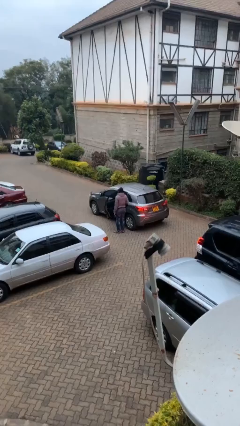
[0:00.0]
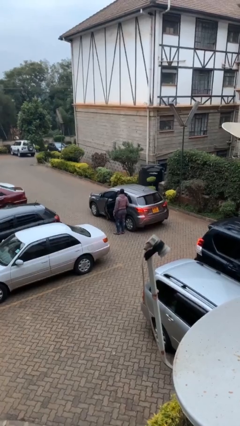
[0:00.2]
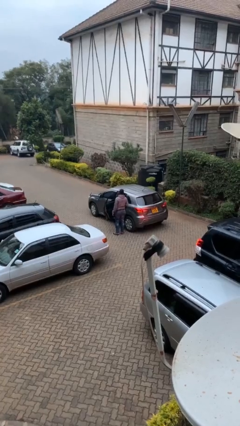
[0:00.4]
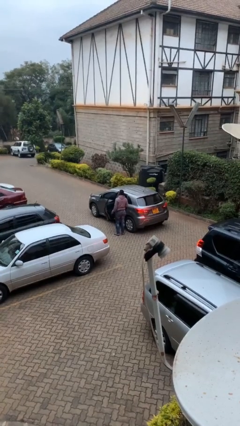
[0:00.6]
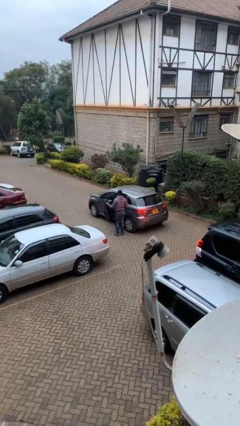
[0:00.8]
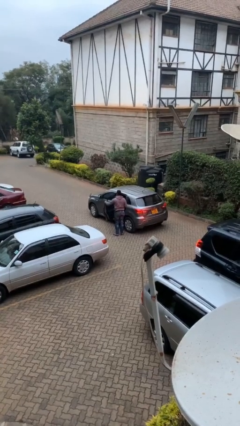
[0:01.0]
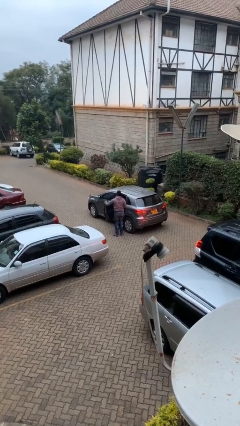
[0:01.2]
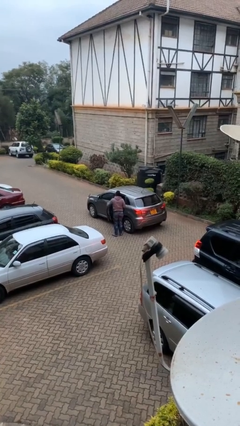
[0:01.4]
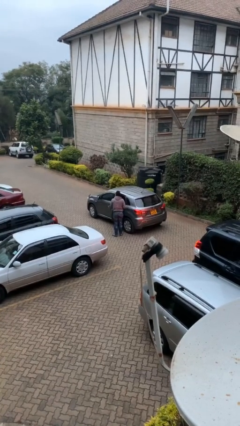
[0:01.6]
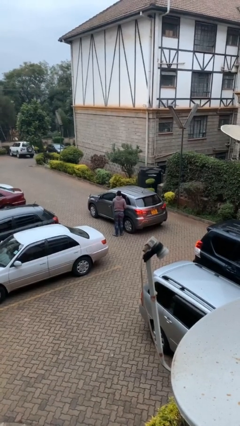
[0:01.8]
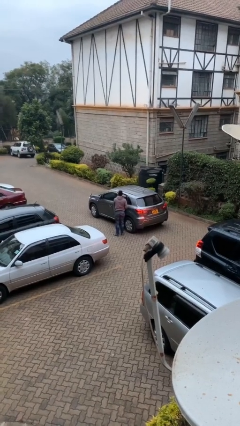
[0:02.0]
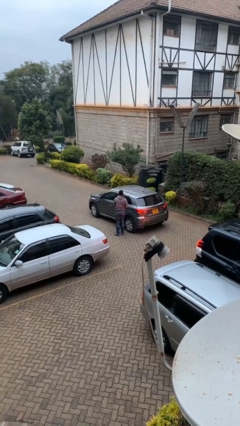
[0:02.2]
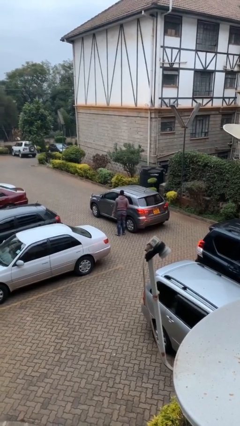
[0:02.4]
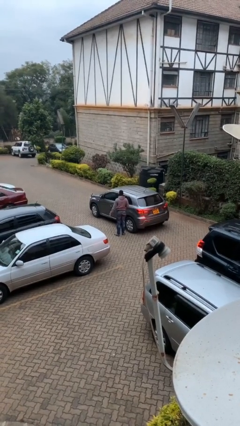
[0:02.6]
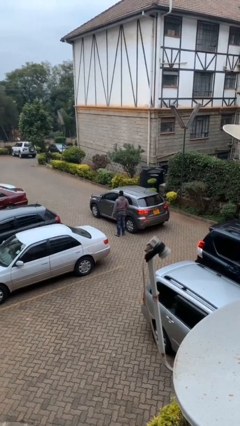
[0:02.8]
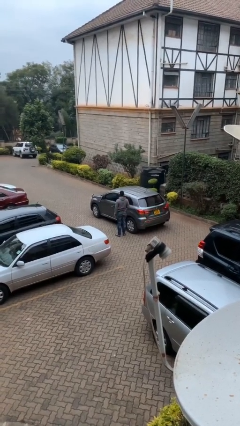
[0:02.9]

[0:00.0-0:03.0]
person closes car door

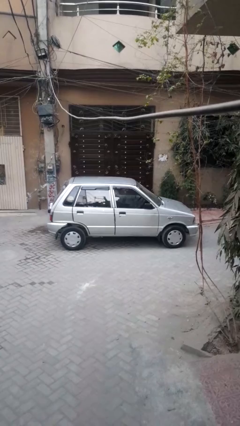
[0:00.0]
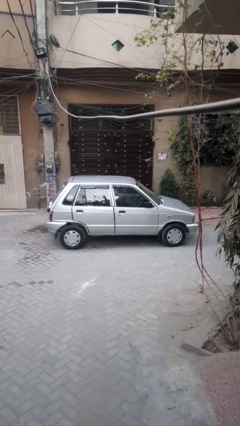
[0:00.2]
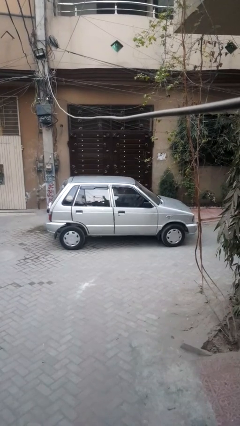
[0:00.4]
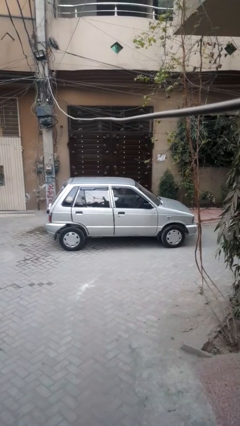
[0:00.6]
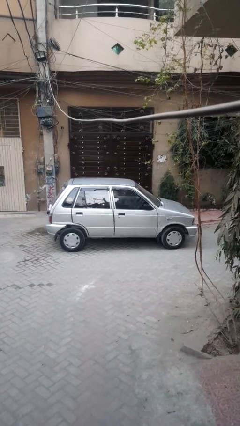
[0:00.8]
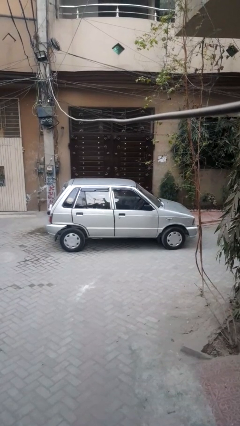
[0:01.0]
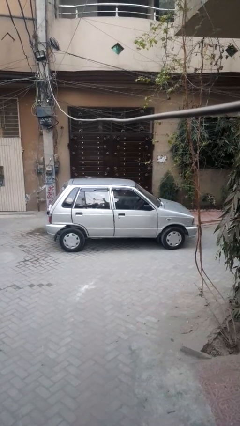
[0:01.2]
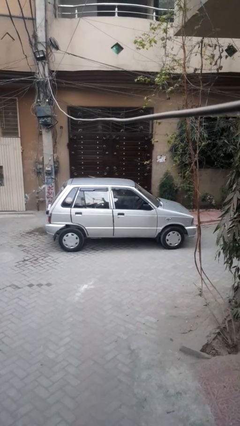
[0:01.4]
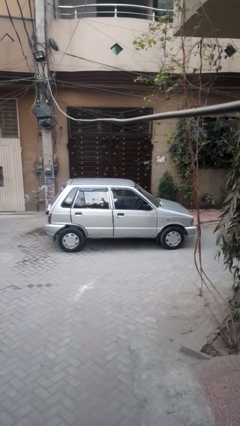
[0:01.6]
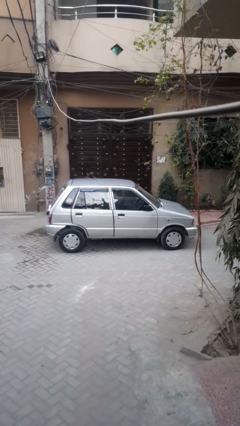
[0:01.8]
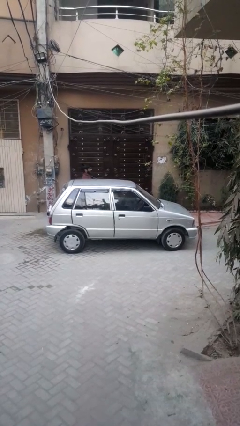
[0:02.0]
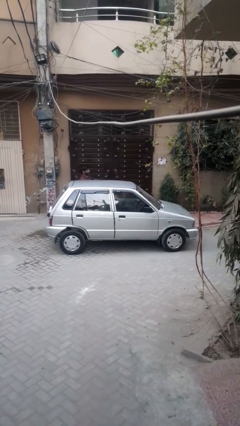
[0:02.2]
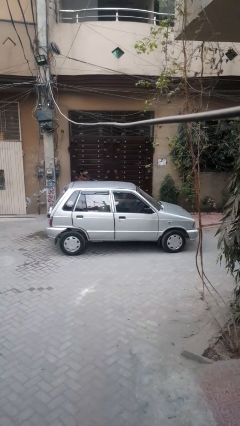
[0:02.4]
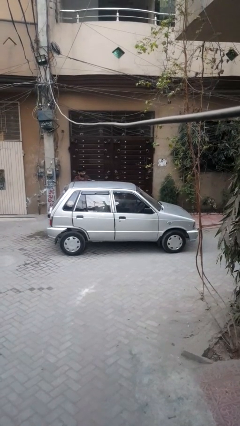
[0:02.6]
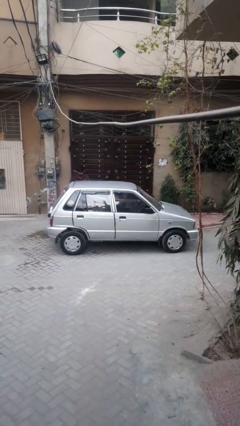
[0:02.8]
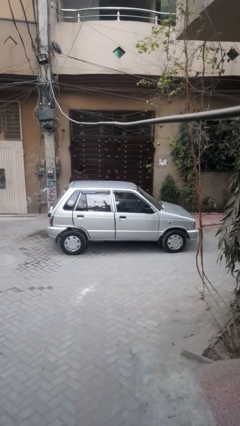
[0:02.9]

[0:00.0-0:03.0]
car drops off person

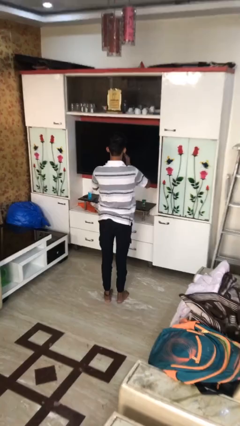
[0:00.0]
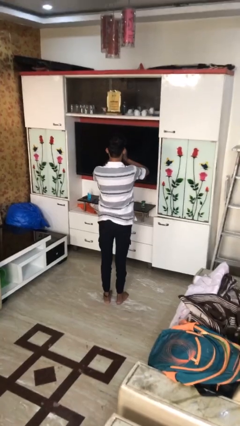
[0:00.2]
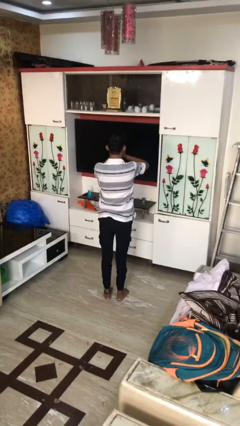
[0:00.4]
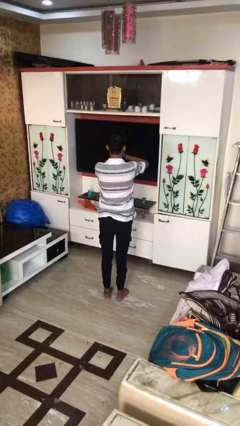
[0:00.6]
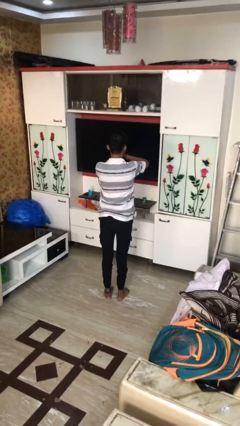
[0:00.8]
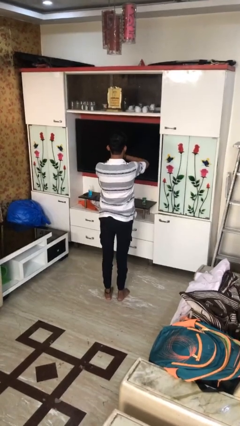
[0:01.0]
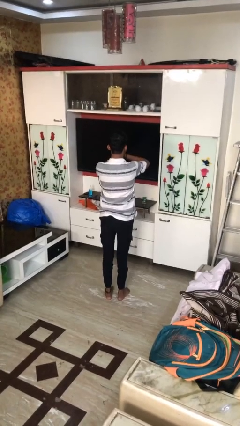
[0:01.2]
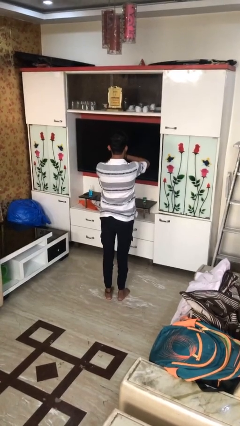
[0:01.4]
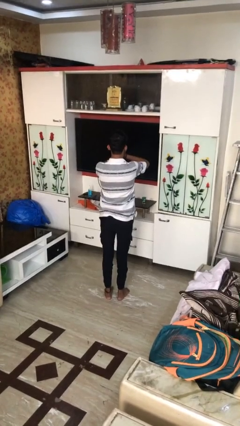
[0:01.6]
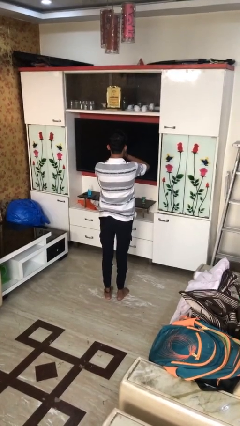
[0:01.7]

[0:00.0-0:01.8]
person covers face with hands

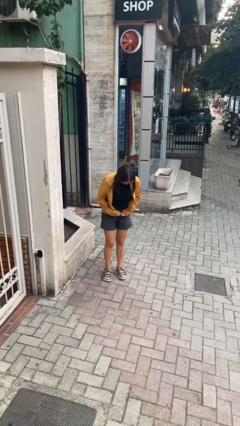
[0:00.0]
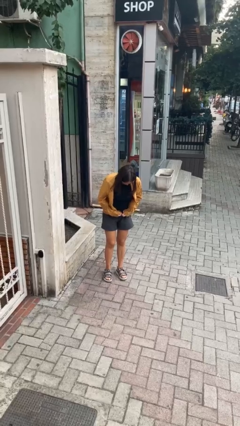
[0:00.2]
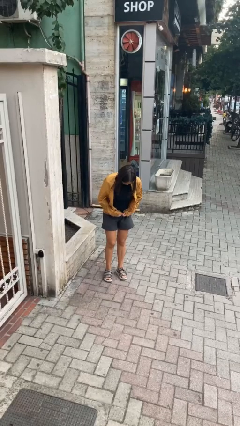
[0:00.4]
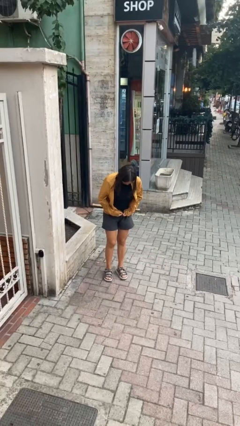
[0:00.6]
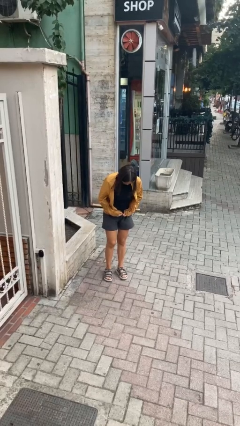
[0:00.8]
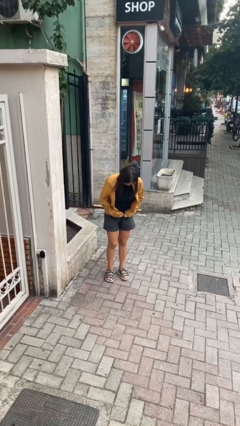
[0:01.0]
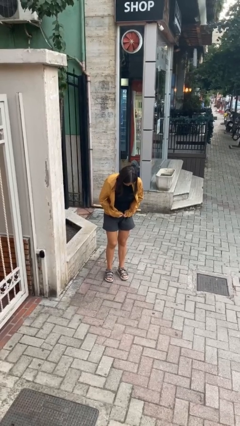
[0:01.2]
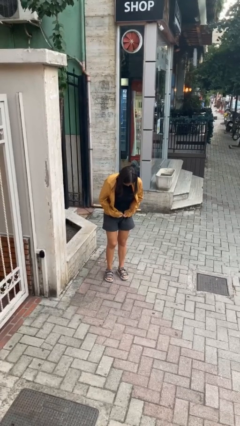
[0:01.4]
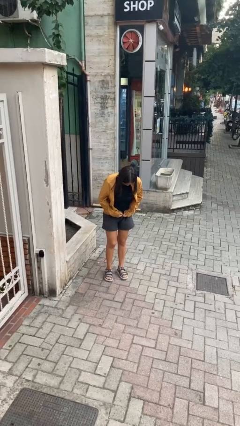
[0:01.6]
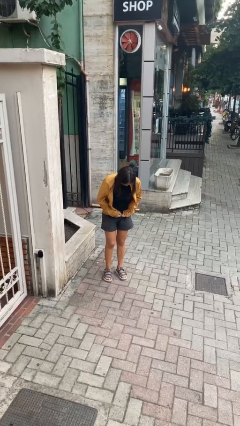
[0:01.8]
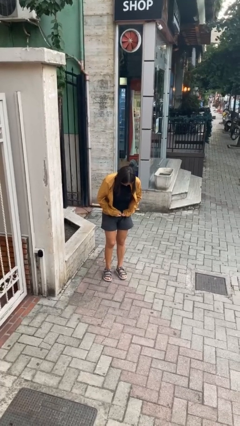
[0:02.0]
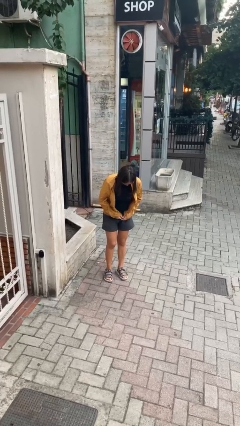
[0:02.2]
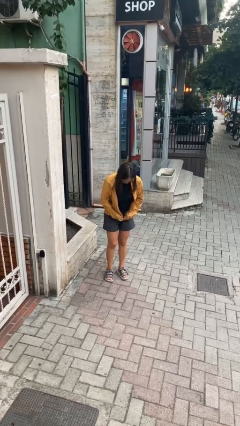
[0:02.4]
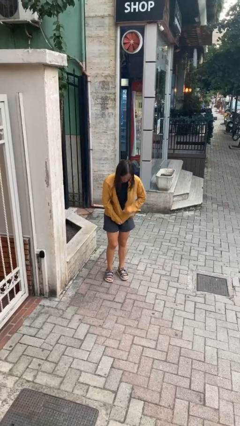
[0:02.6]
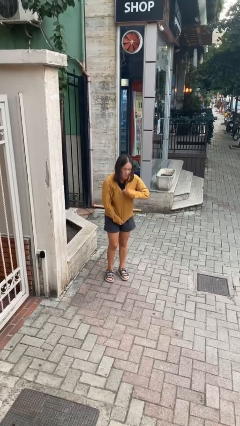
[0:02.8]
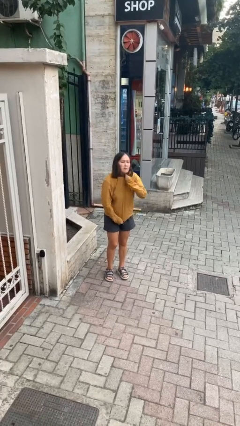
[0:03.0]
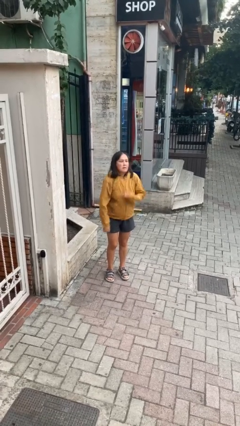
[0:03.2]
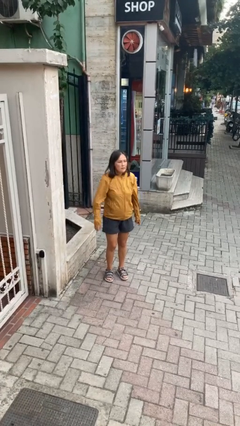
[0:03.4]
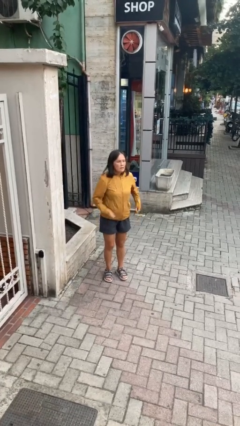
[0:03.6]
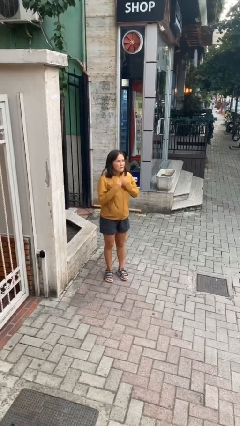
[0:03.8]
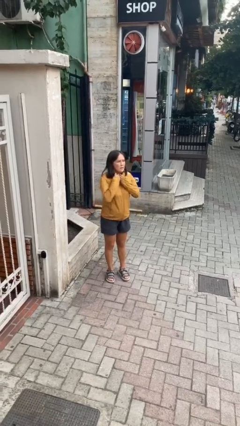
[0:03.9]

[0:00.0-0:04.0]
person zips up jacket

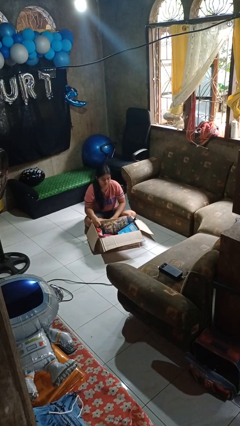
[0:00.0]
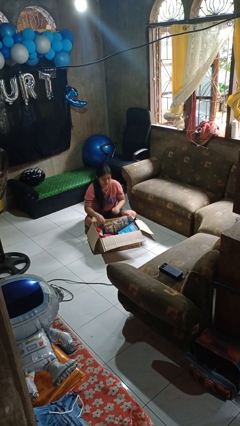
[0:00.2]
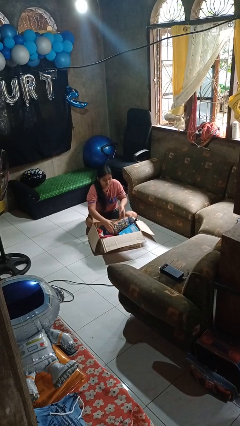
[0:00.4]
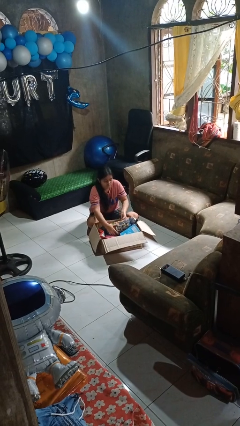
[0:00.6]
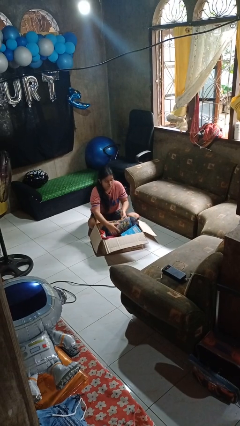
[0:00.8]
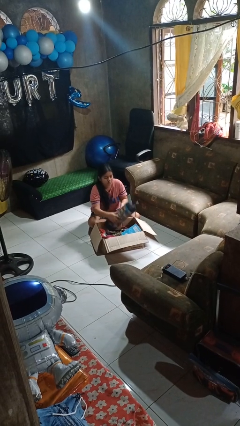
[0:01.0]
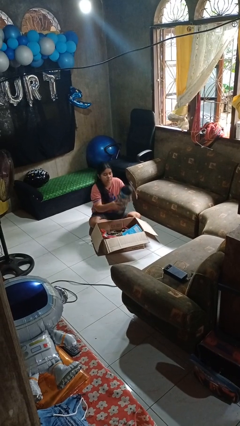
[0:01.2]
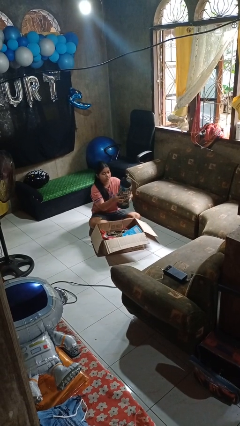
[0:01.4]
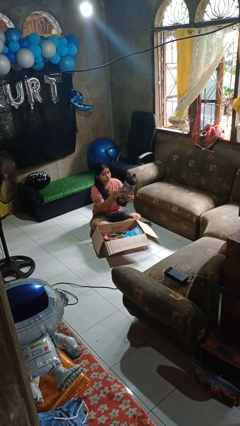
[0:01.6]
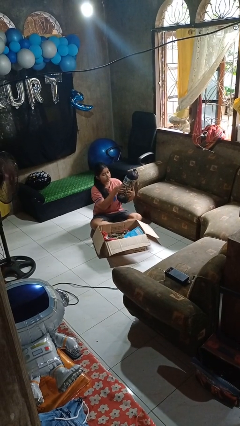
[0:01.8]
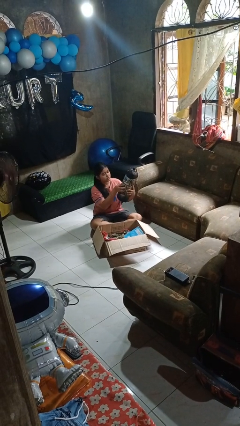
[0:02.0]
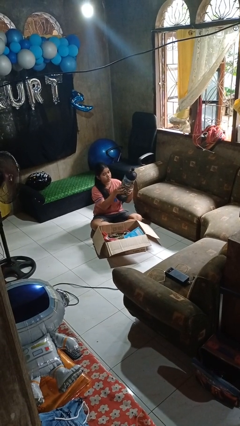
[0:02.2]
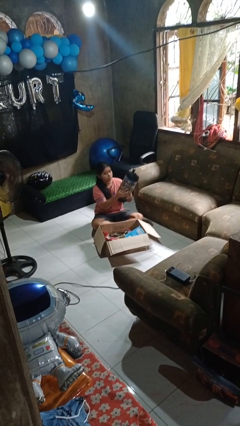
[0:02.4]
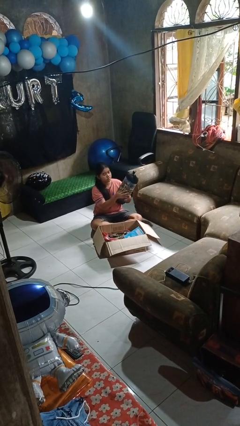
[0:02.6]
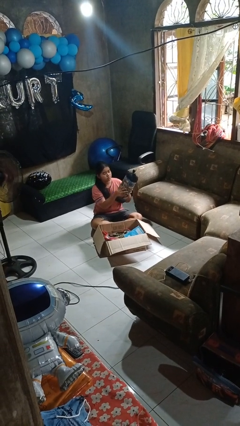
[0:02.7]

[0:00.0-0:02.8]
person takes object from box

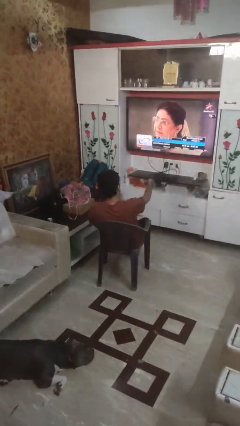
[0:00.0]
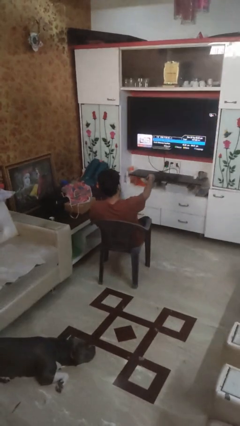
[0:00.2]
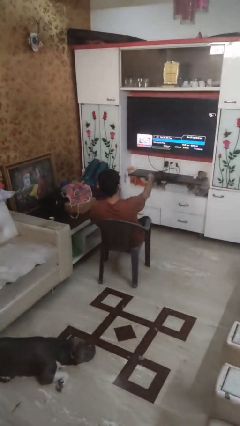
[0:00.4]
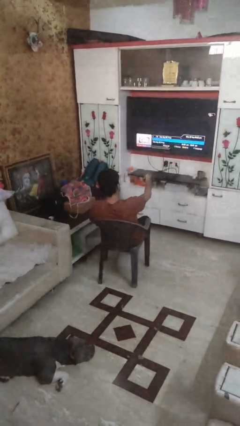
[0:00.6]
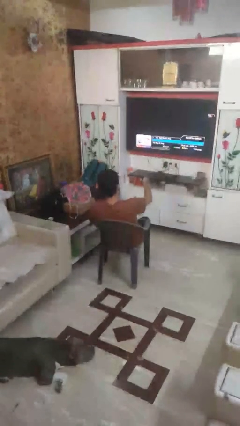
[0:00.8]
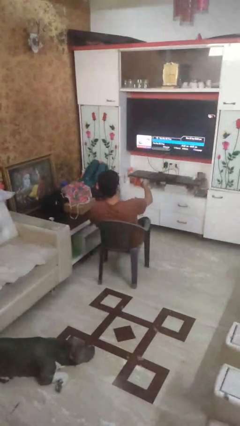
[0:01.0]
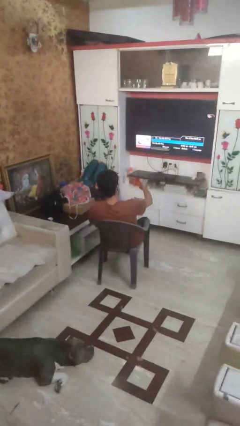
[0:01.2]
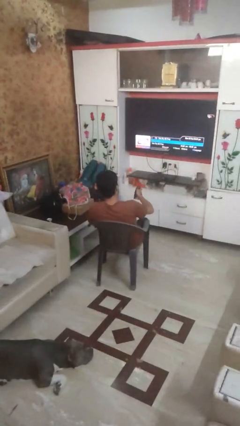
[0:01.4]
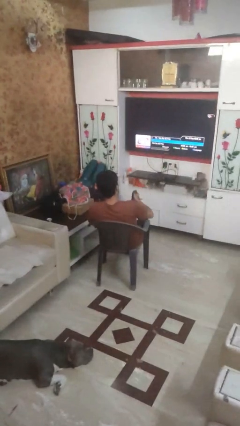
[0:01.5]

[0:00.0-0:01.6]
person uses television remote

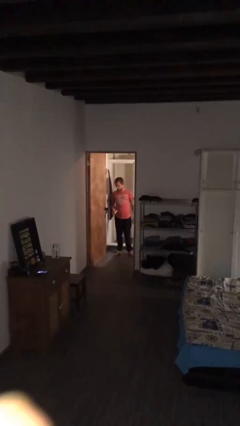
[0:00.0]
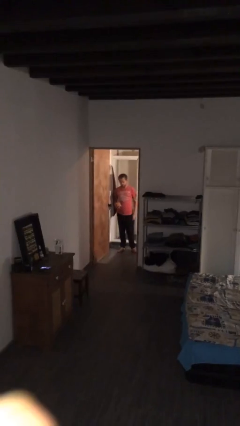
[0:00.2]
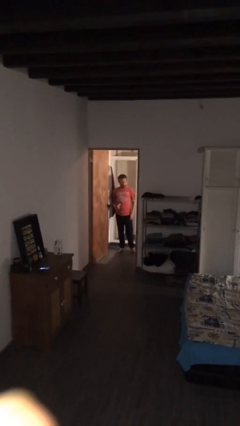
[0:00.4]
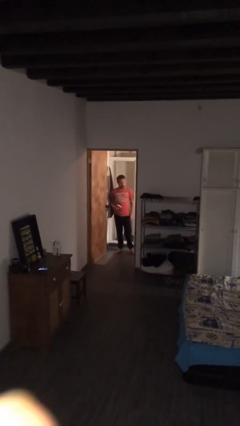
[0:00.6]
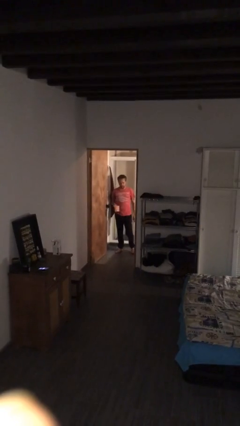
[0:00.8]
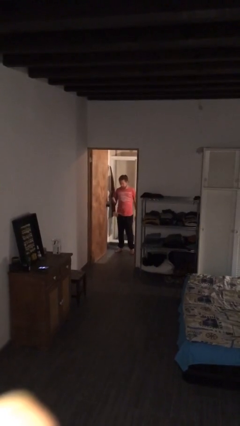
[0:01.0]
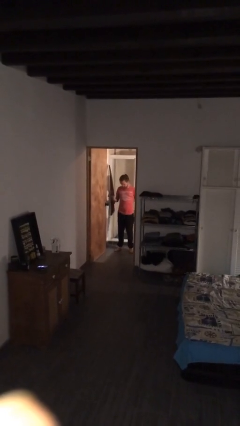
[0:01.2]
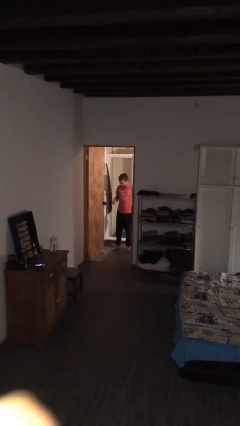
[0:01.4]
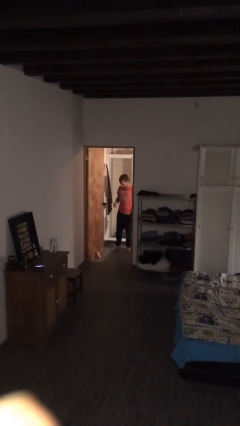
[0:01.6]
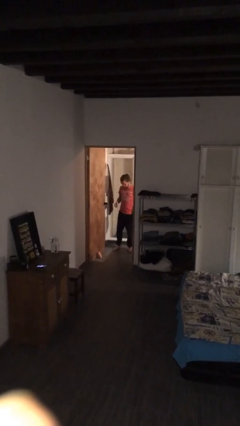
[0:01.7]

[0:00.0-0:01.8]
person drops object
